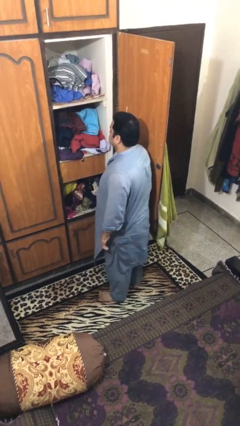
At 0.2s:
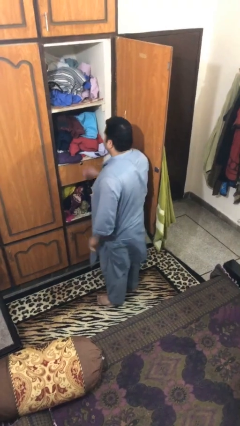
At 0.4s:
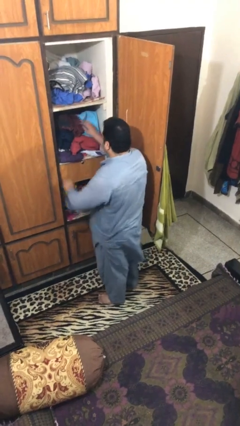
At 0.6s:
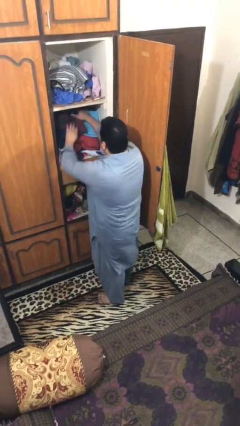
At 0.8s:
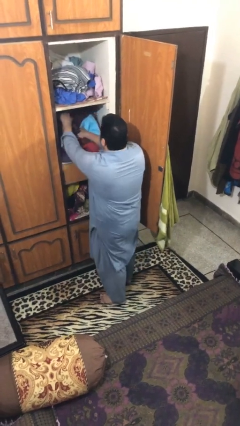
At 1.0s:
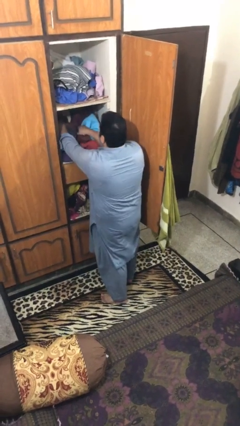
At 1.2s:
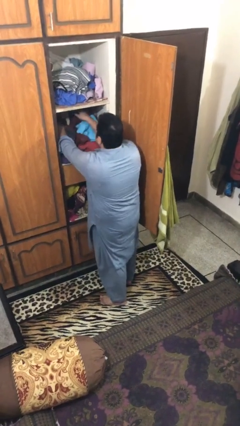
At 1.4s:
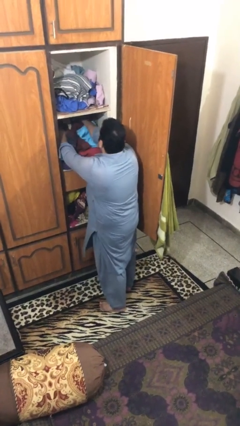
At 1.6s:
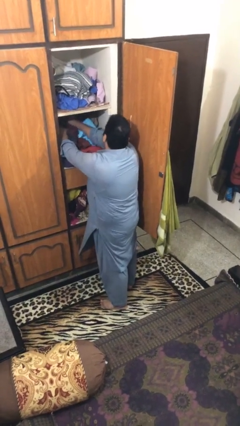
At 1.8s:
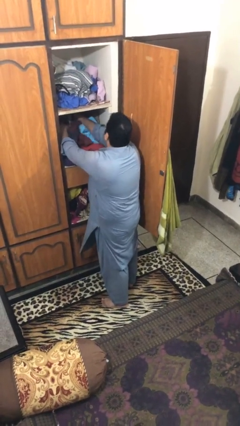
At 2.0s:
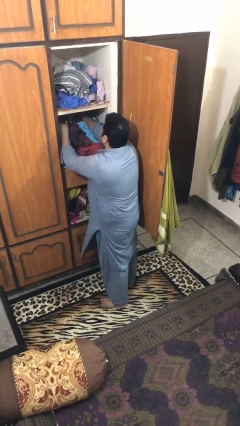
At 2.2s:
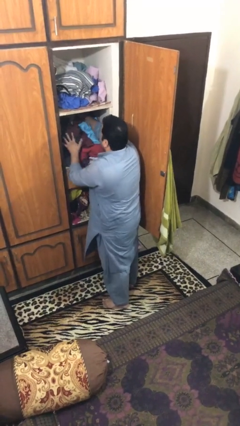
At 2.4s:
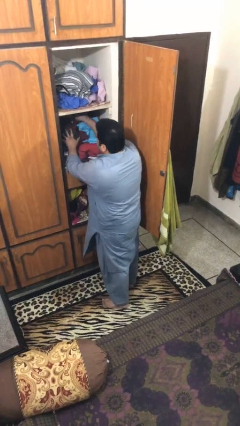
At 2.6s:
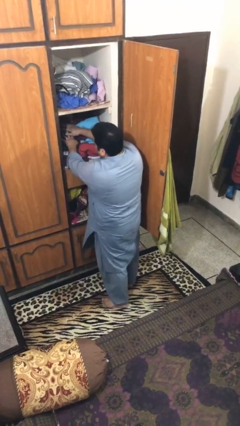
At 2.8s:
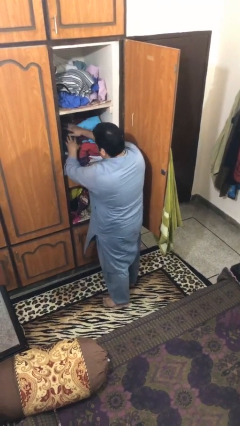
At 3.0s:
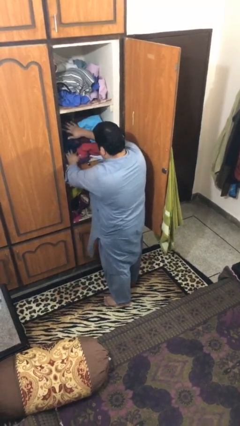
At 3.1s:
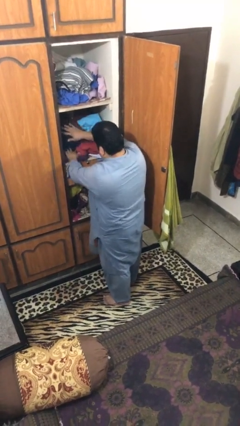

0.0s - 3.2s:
person searches in cabinet

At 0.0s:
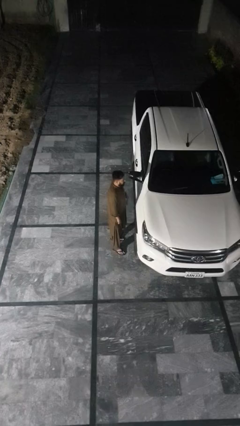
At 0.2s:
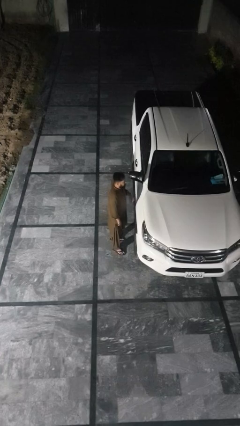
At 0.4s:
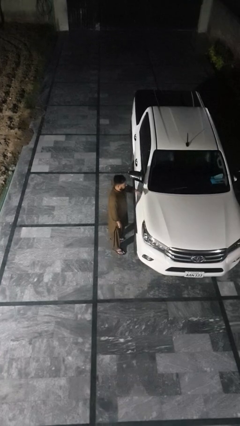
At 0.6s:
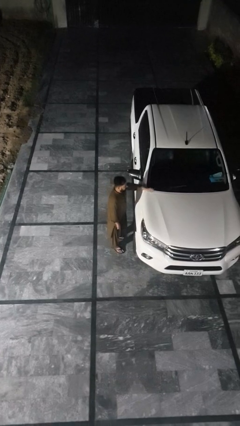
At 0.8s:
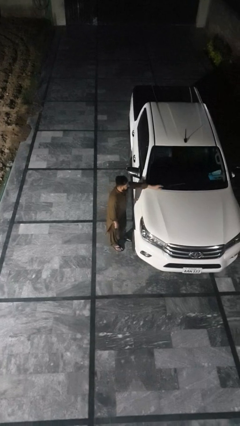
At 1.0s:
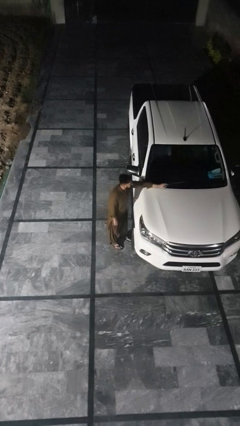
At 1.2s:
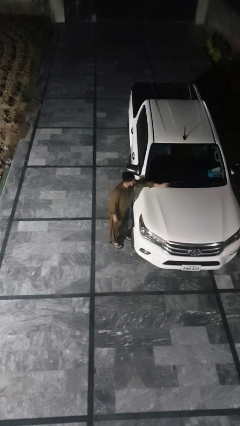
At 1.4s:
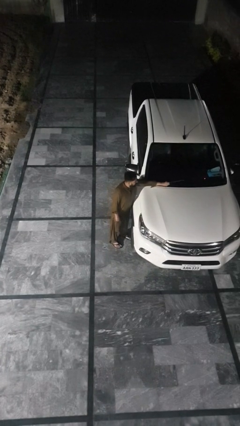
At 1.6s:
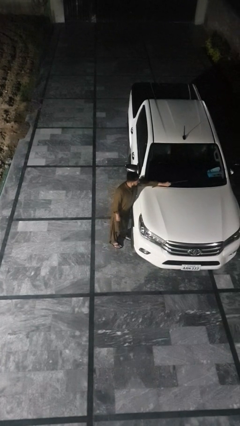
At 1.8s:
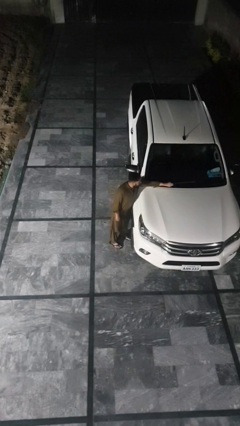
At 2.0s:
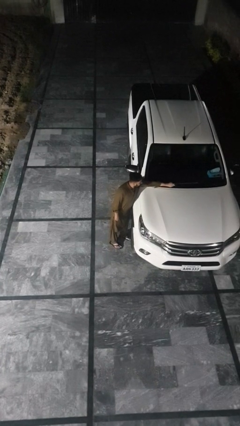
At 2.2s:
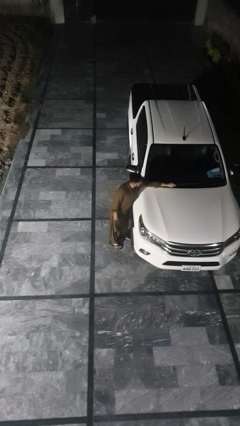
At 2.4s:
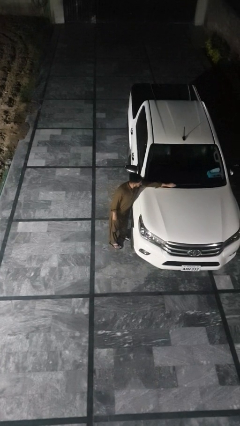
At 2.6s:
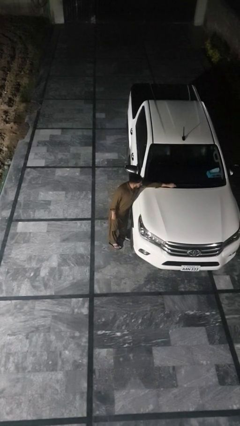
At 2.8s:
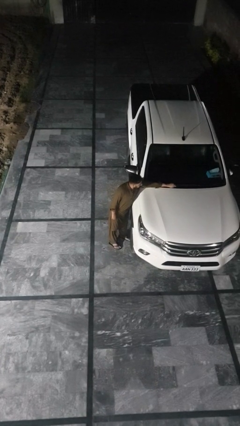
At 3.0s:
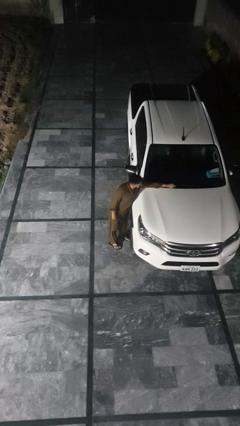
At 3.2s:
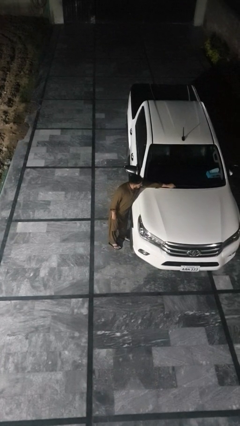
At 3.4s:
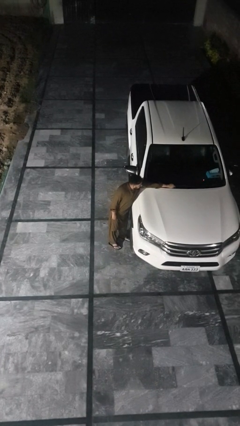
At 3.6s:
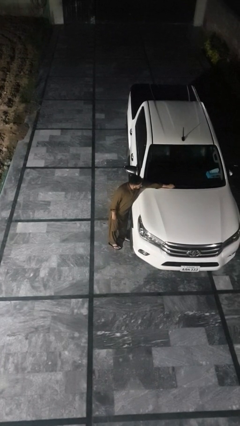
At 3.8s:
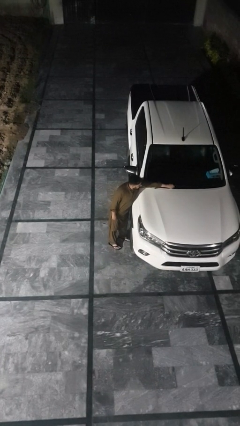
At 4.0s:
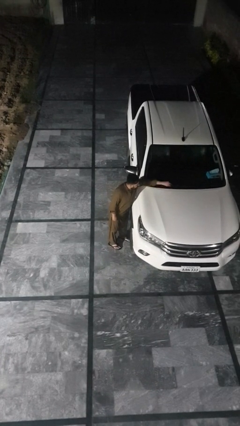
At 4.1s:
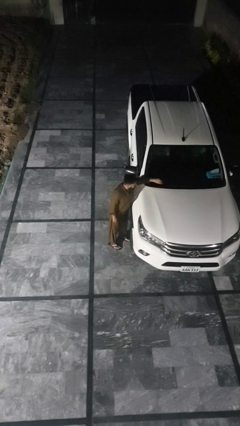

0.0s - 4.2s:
person flips down car wipers

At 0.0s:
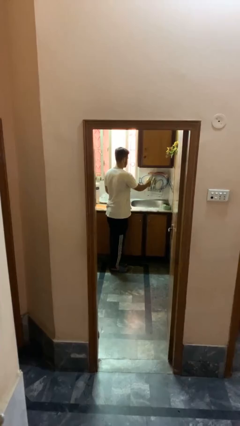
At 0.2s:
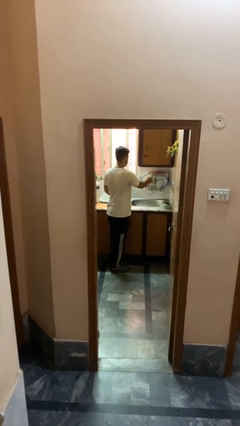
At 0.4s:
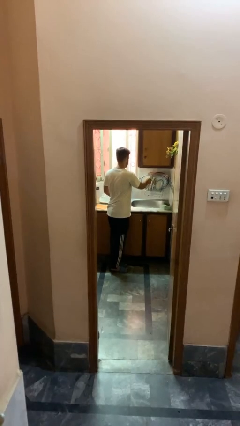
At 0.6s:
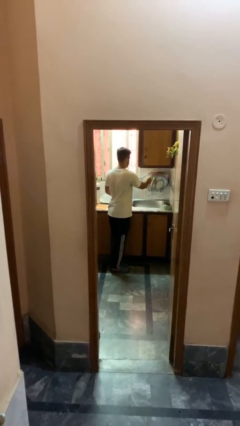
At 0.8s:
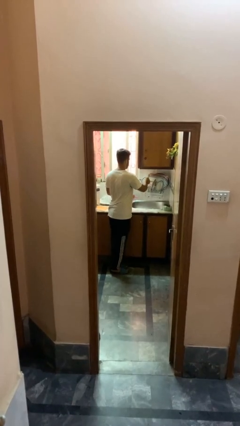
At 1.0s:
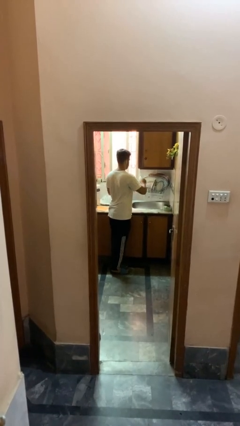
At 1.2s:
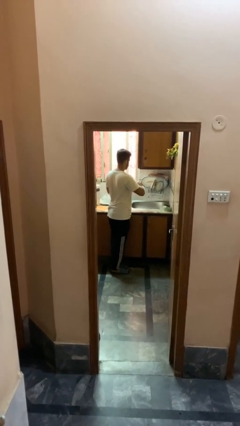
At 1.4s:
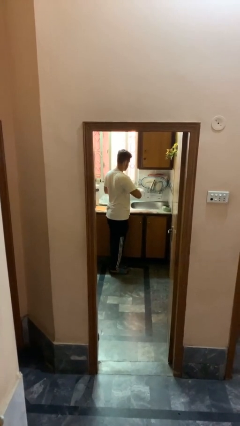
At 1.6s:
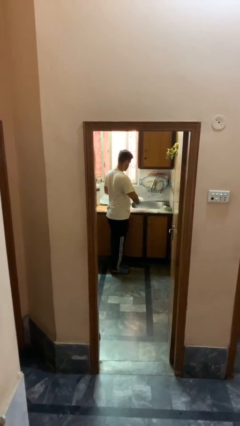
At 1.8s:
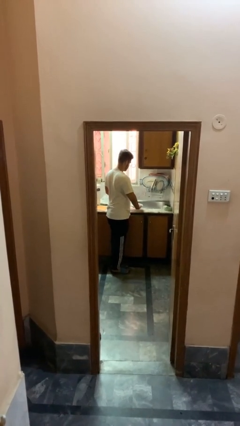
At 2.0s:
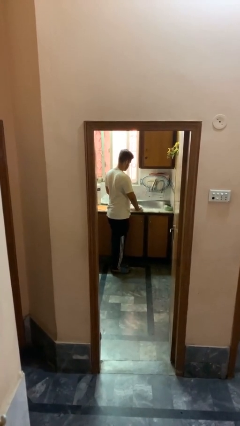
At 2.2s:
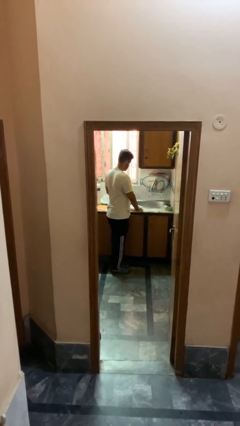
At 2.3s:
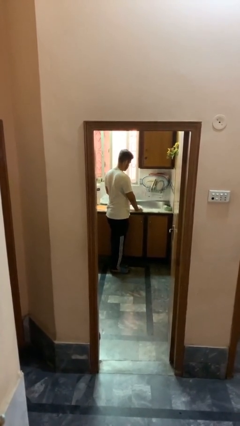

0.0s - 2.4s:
person unloads dishwasher

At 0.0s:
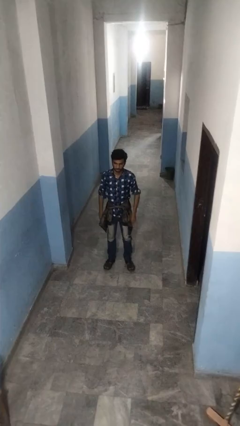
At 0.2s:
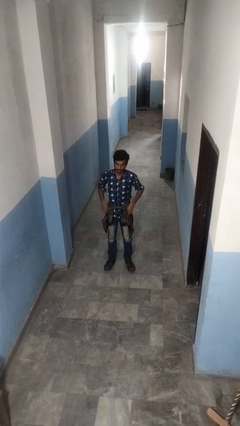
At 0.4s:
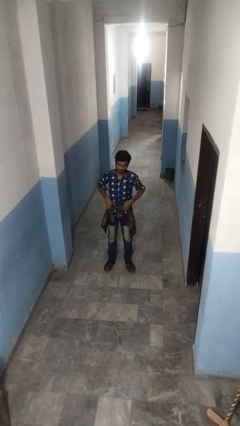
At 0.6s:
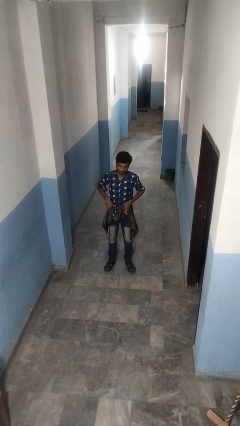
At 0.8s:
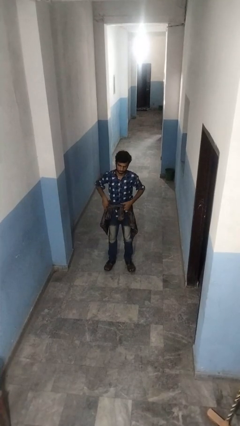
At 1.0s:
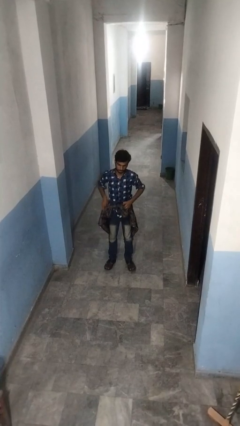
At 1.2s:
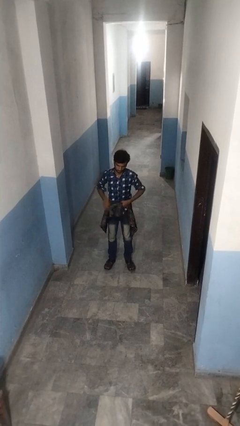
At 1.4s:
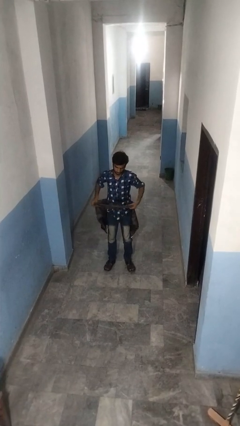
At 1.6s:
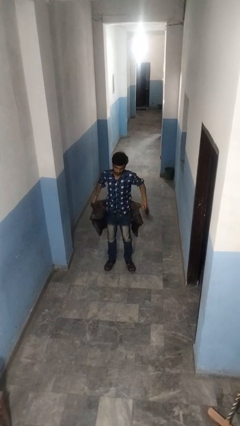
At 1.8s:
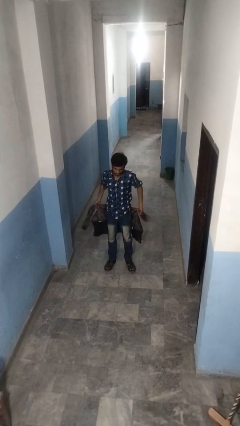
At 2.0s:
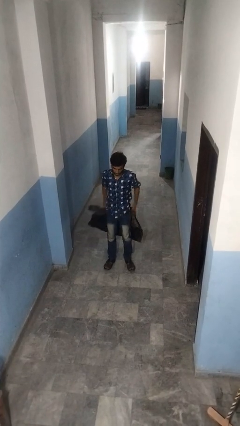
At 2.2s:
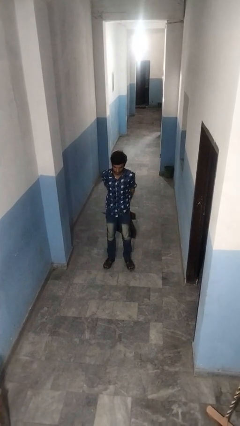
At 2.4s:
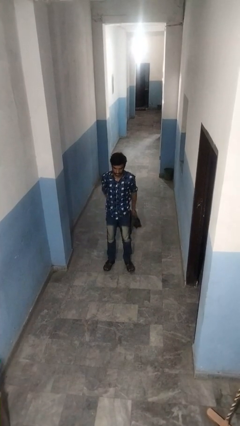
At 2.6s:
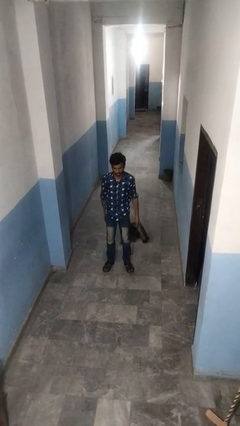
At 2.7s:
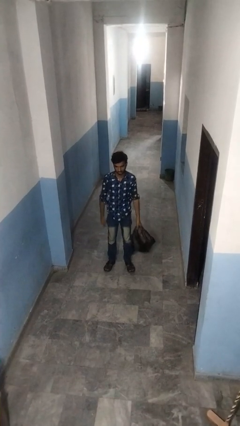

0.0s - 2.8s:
person unties jacket around waist

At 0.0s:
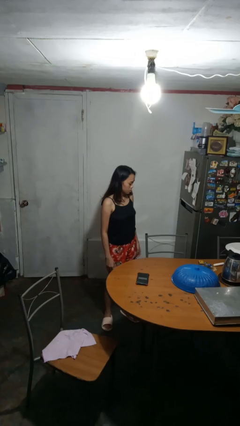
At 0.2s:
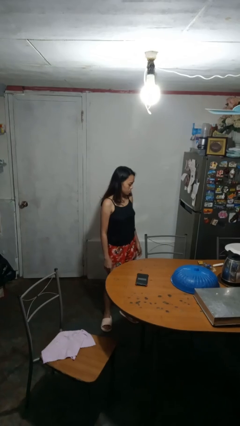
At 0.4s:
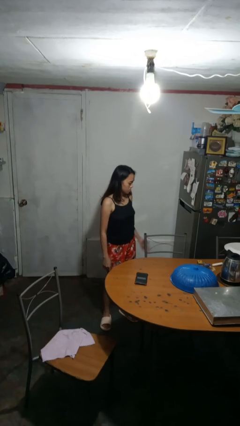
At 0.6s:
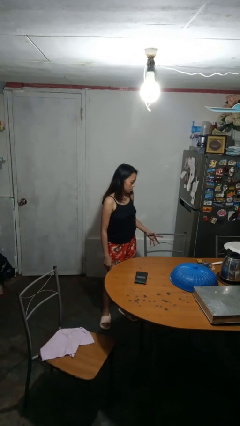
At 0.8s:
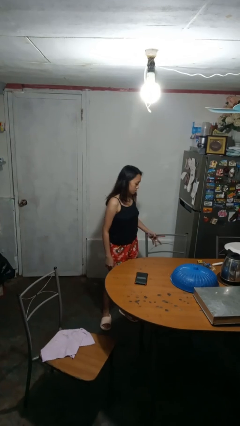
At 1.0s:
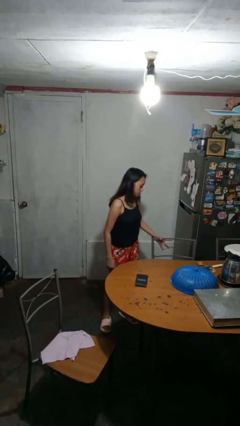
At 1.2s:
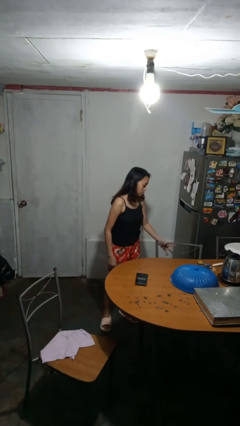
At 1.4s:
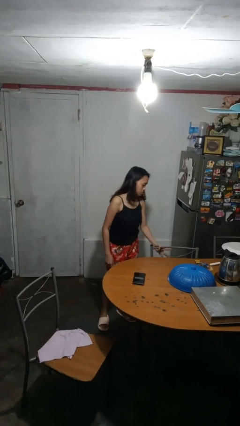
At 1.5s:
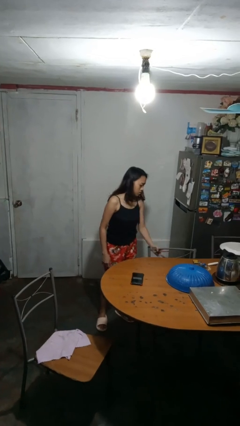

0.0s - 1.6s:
person pushes in chair

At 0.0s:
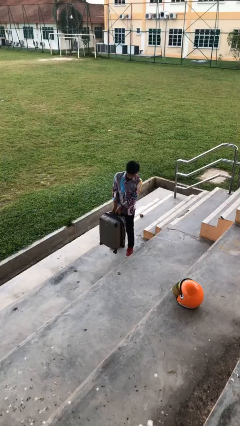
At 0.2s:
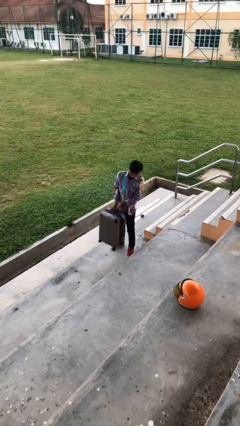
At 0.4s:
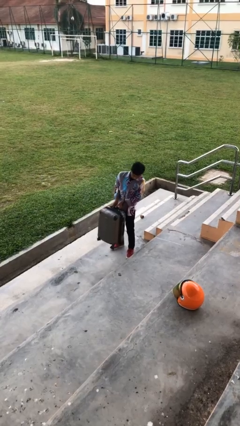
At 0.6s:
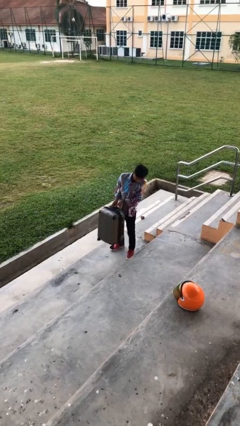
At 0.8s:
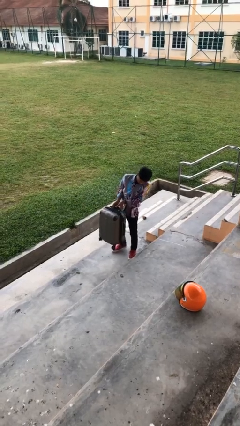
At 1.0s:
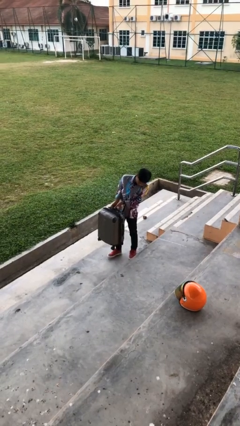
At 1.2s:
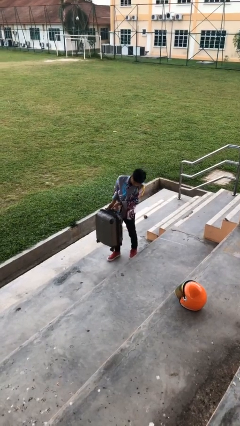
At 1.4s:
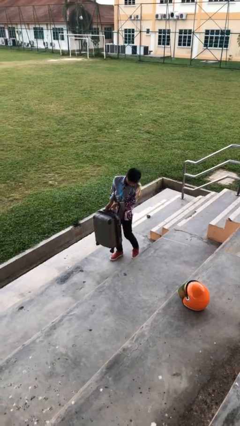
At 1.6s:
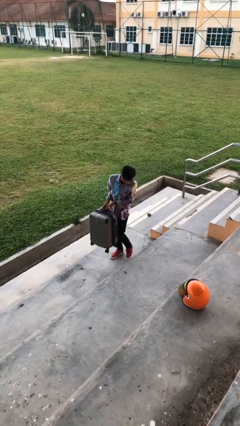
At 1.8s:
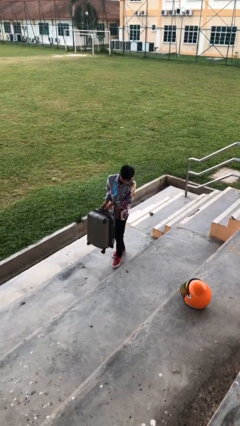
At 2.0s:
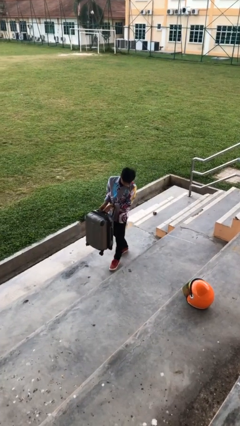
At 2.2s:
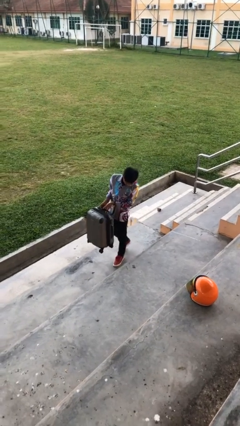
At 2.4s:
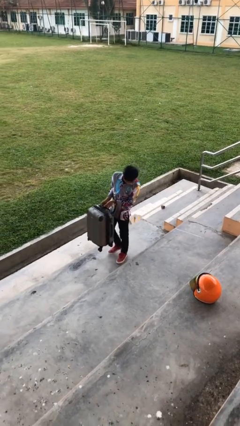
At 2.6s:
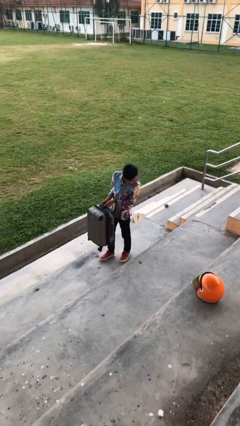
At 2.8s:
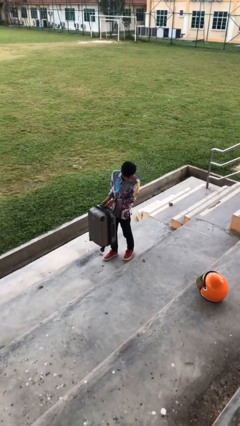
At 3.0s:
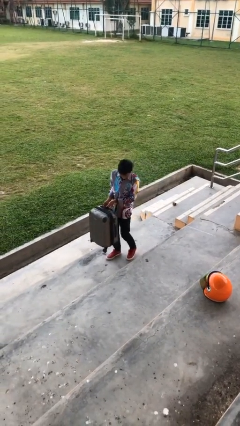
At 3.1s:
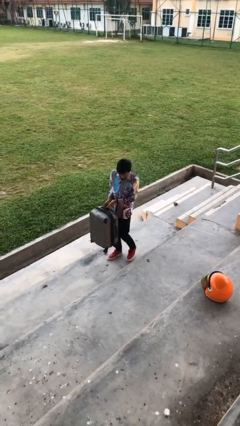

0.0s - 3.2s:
person carries heavy object

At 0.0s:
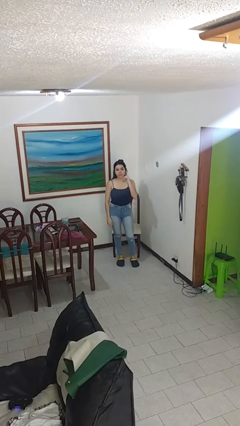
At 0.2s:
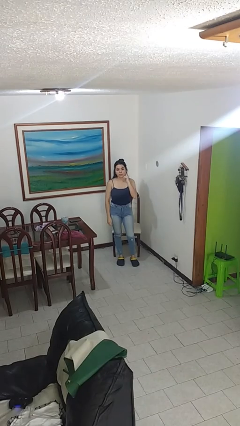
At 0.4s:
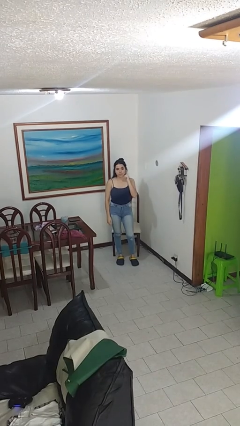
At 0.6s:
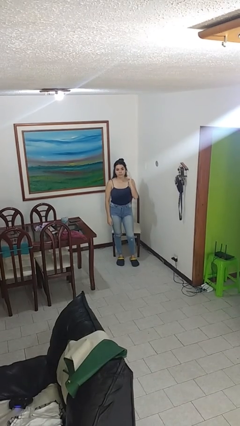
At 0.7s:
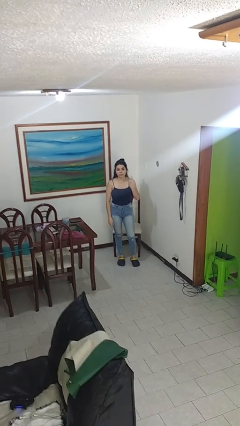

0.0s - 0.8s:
person gestures listen closely
